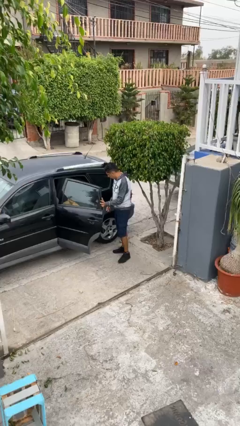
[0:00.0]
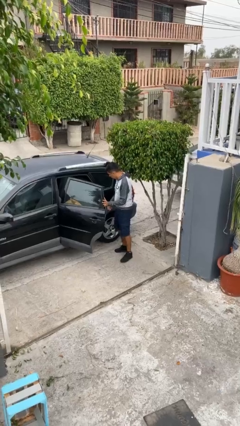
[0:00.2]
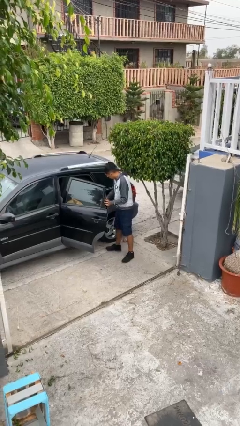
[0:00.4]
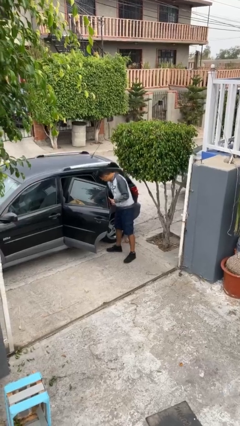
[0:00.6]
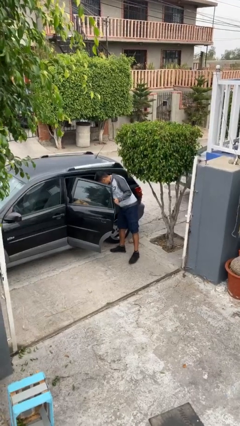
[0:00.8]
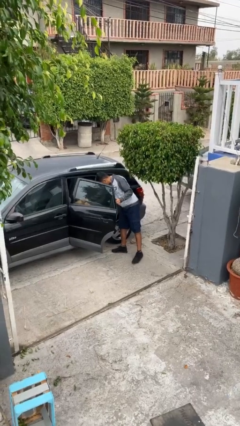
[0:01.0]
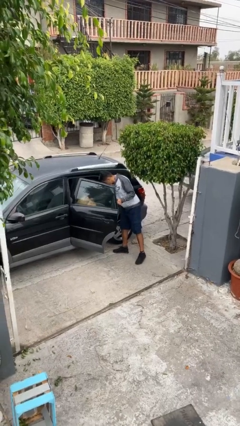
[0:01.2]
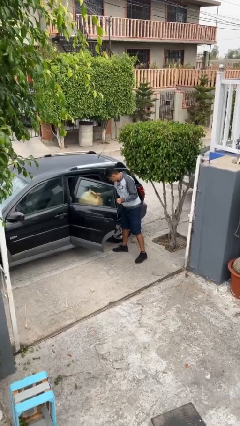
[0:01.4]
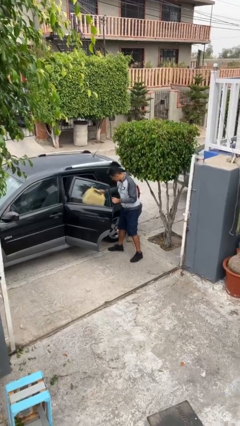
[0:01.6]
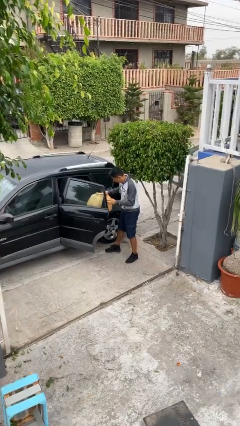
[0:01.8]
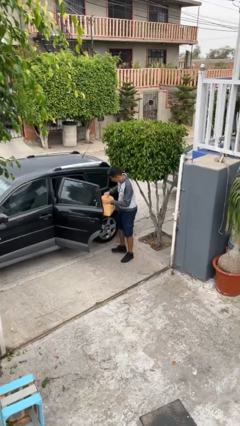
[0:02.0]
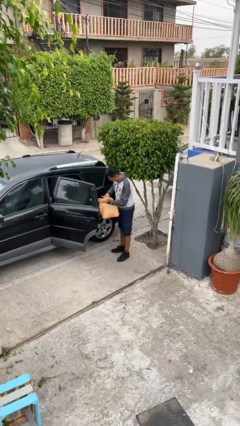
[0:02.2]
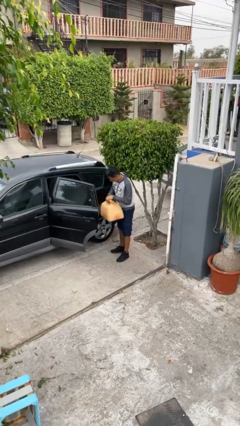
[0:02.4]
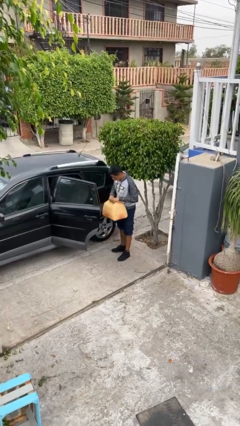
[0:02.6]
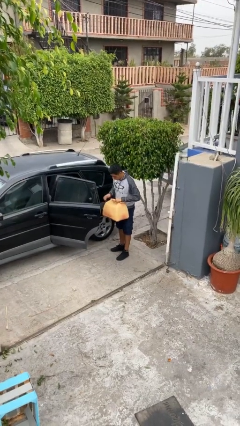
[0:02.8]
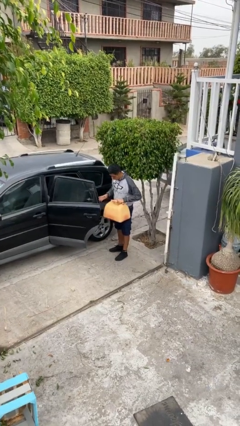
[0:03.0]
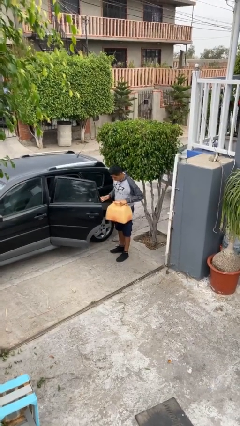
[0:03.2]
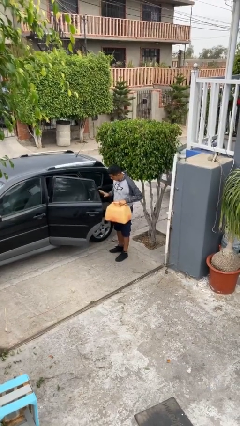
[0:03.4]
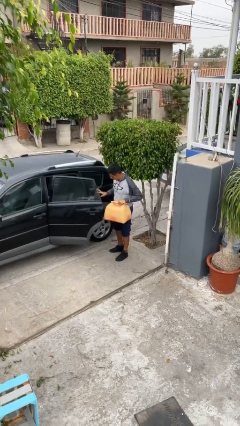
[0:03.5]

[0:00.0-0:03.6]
person unloads car

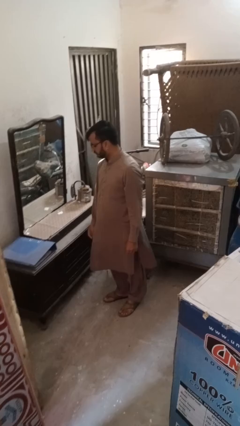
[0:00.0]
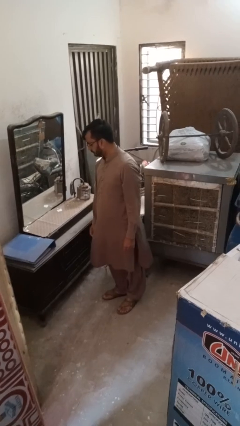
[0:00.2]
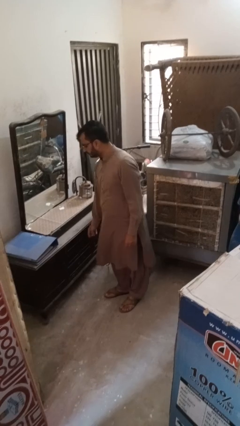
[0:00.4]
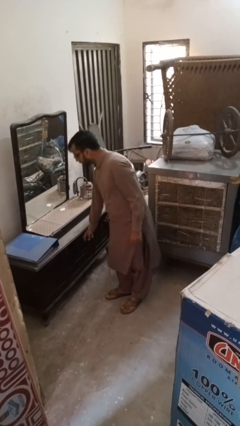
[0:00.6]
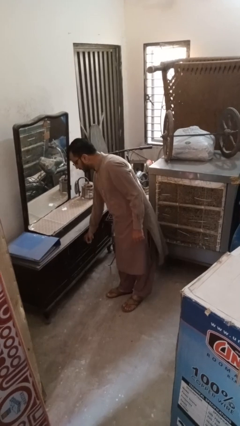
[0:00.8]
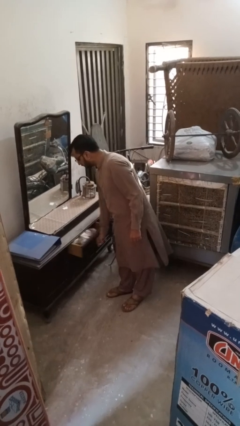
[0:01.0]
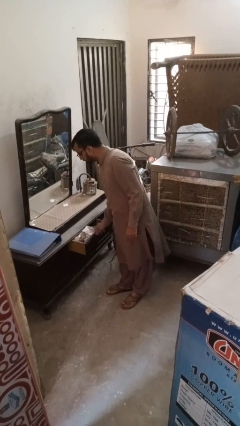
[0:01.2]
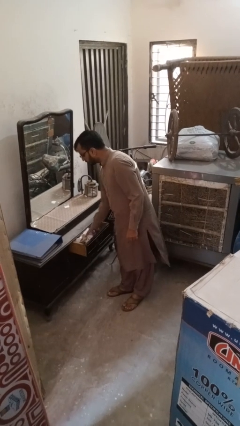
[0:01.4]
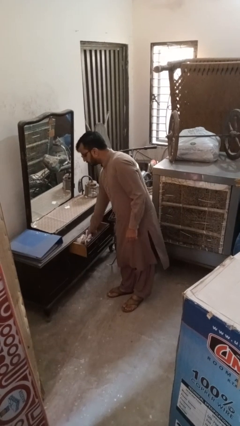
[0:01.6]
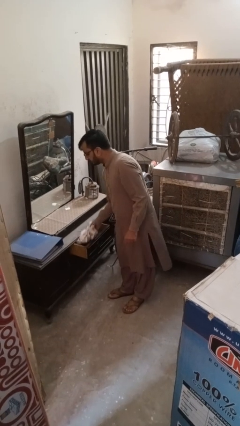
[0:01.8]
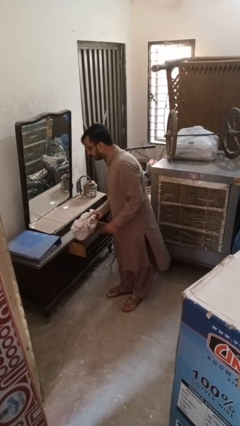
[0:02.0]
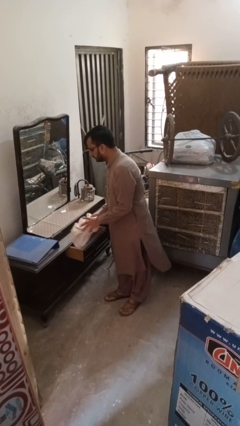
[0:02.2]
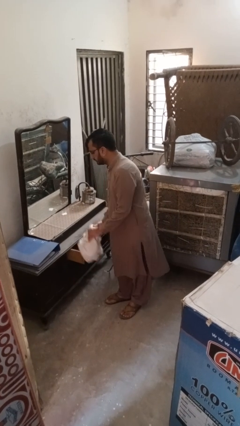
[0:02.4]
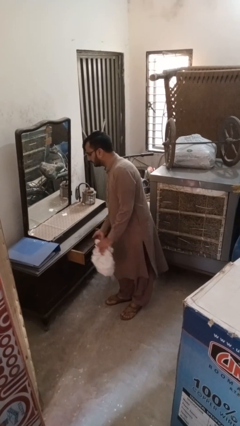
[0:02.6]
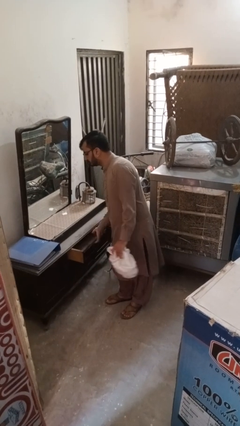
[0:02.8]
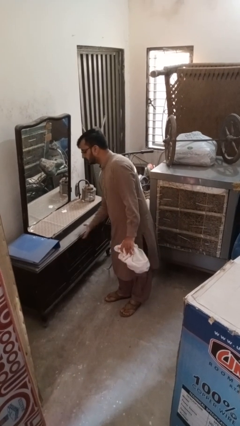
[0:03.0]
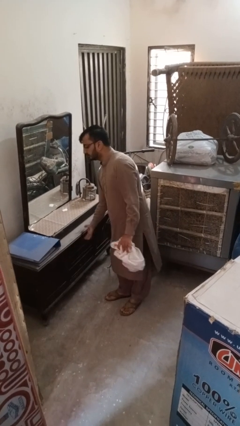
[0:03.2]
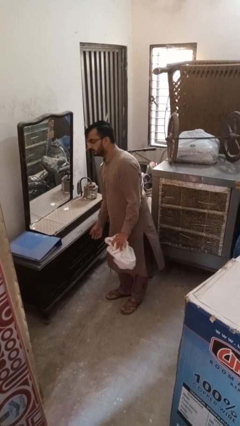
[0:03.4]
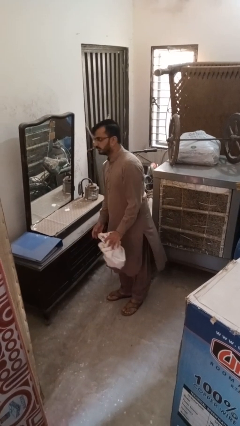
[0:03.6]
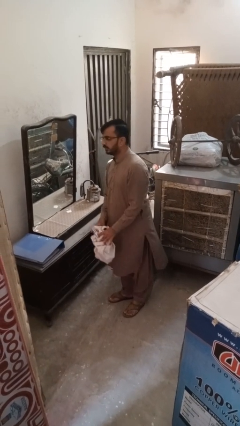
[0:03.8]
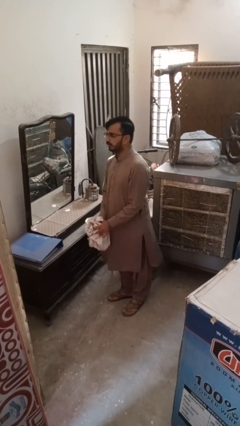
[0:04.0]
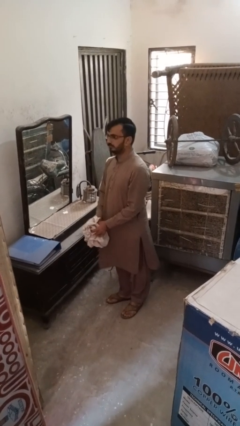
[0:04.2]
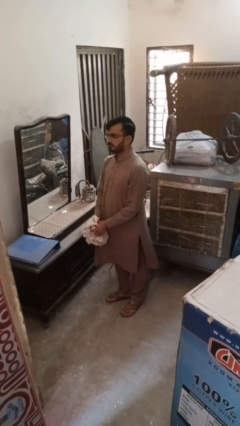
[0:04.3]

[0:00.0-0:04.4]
person takes clothes from dresser

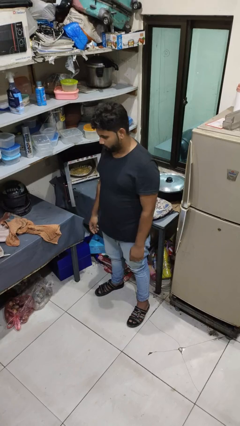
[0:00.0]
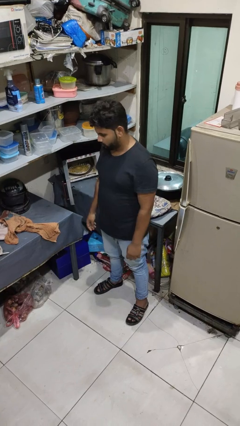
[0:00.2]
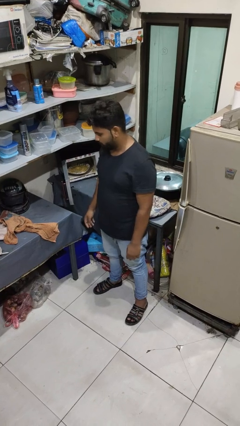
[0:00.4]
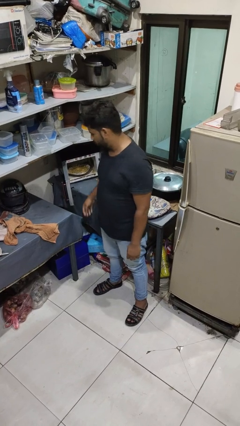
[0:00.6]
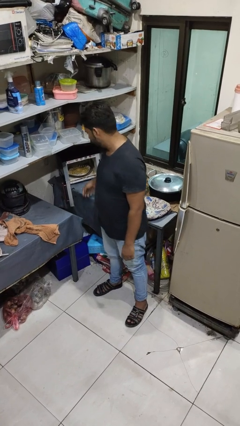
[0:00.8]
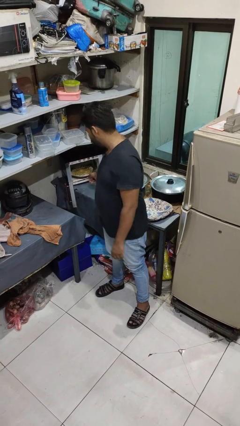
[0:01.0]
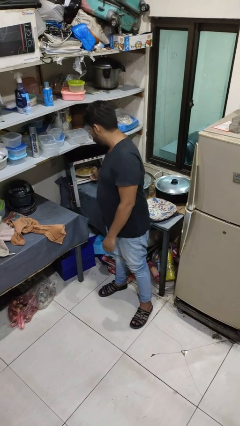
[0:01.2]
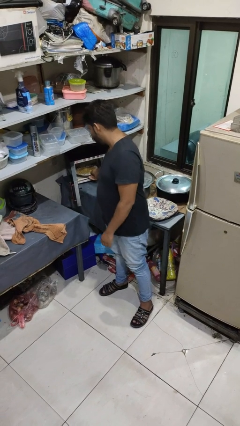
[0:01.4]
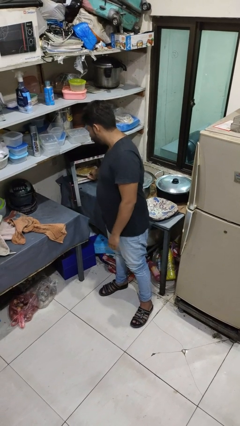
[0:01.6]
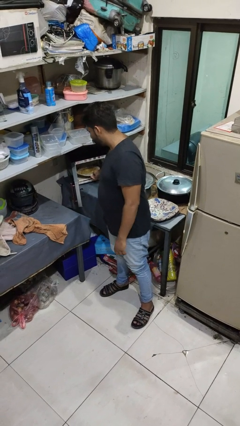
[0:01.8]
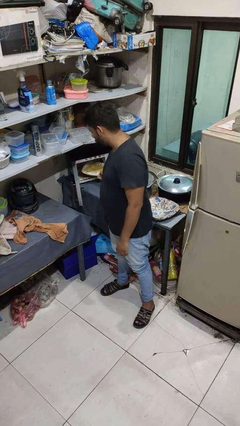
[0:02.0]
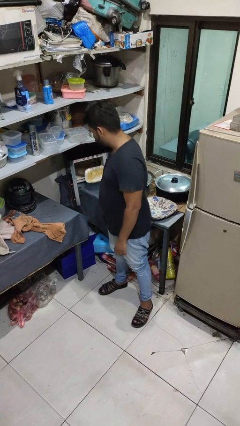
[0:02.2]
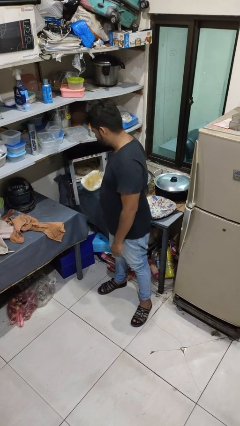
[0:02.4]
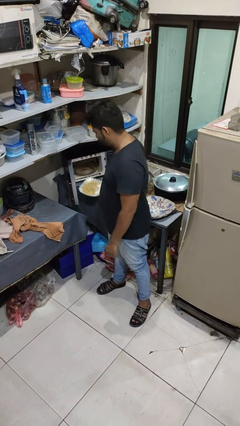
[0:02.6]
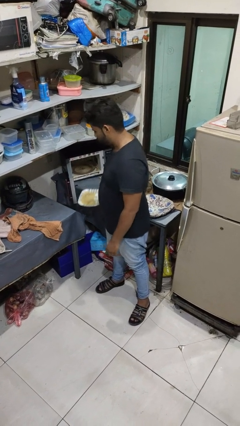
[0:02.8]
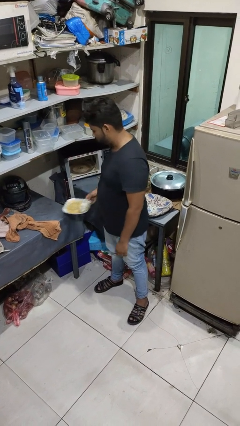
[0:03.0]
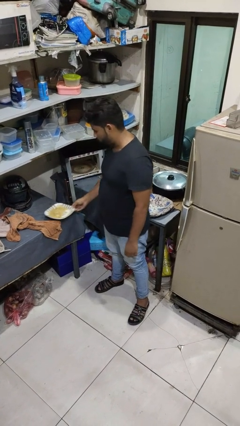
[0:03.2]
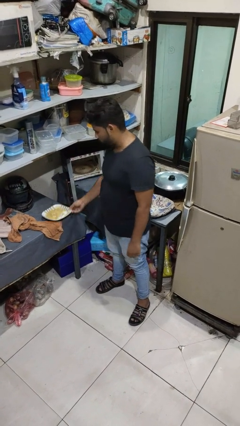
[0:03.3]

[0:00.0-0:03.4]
person takes object from microwave

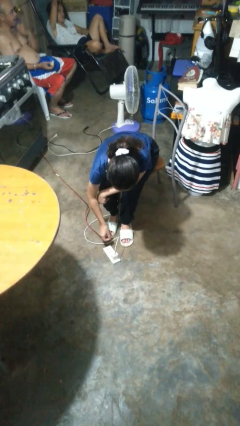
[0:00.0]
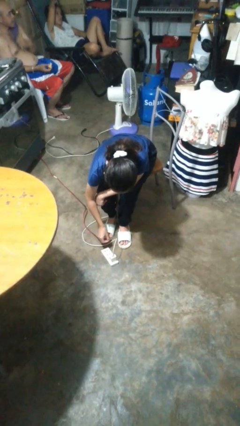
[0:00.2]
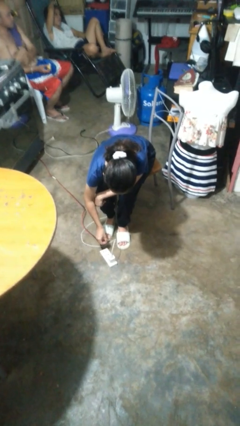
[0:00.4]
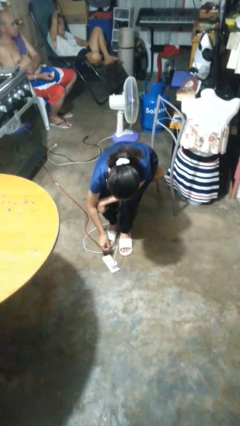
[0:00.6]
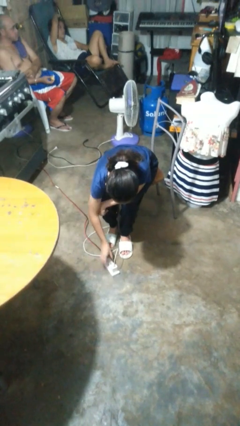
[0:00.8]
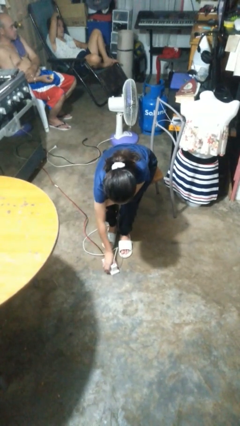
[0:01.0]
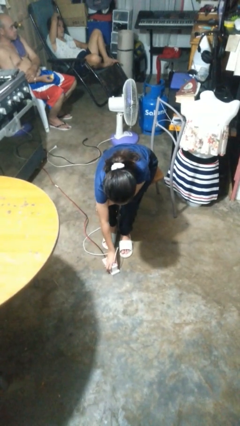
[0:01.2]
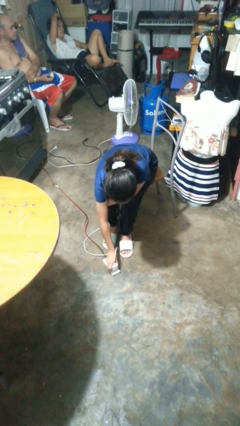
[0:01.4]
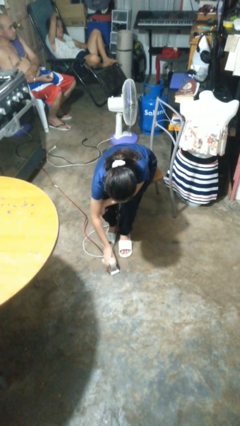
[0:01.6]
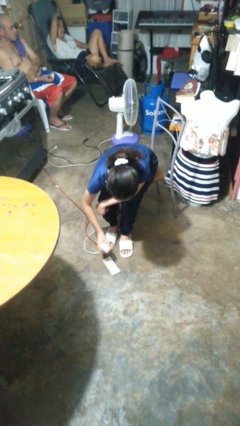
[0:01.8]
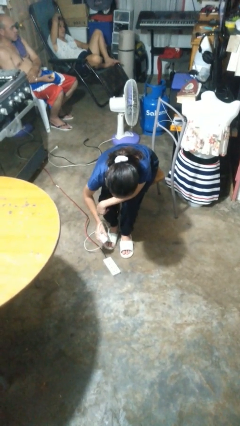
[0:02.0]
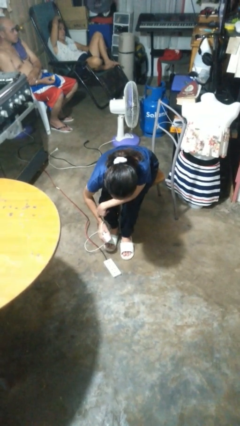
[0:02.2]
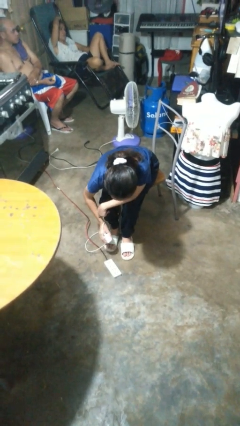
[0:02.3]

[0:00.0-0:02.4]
person unplugs from electrical socket

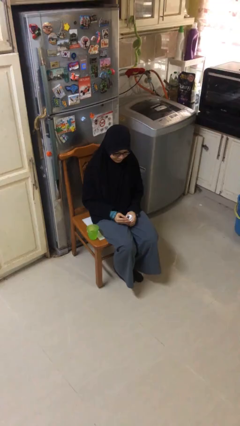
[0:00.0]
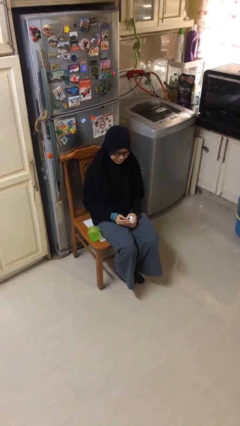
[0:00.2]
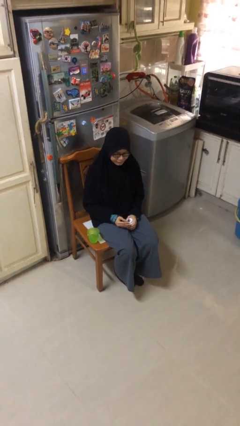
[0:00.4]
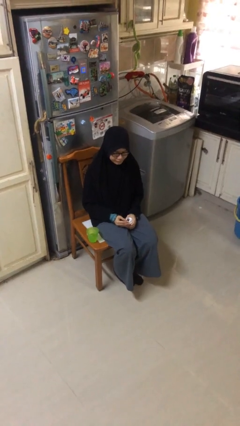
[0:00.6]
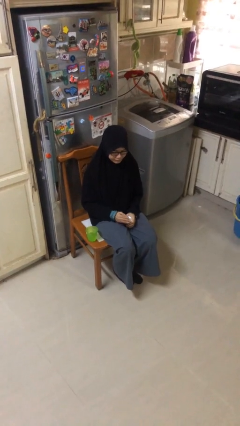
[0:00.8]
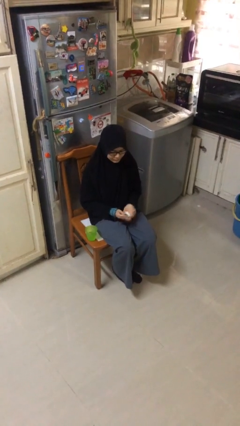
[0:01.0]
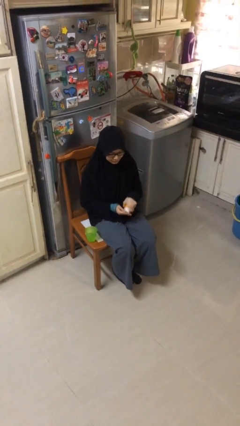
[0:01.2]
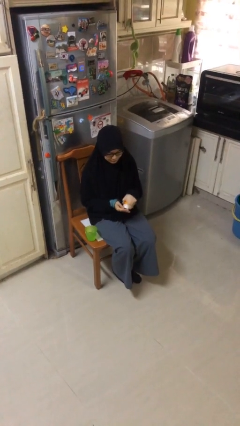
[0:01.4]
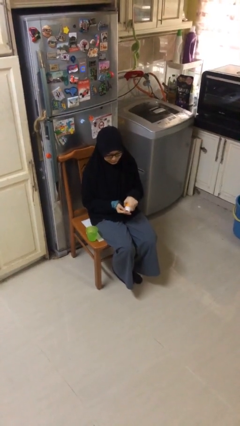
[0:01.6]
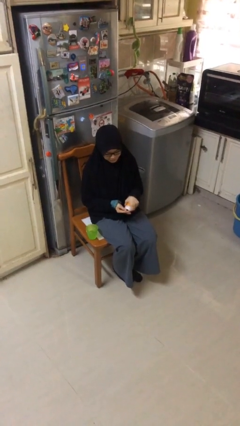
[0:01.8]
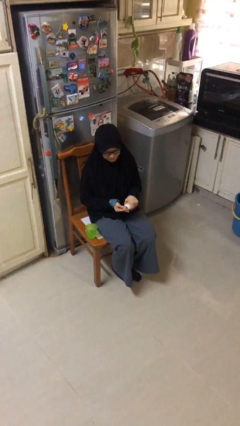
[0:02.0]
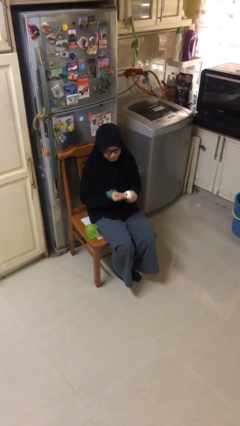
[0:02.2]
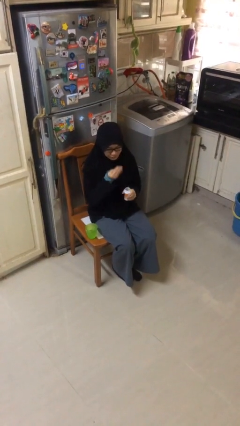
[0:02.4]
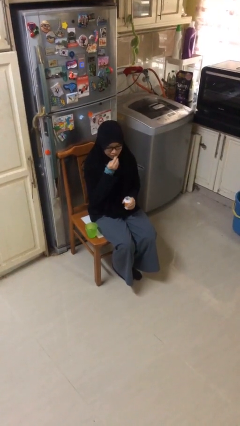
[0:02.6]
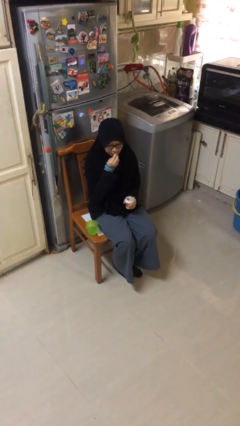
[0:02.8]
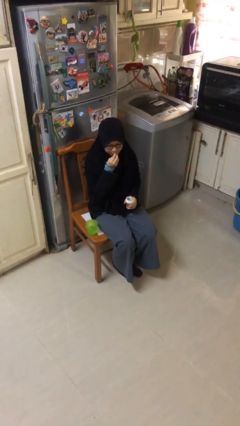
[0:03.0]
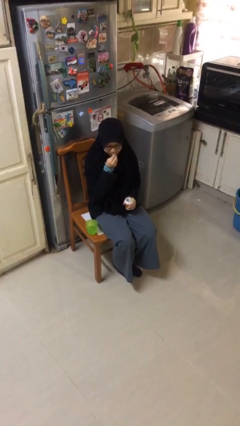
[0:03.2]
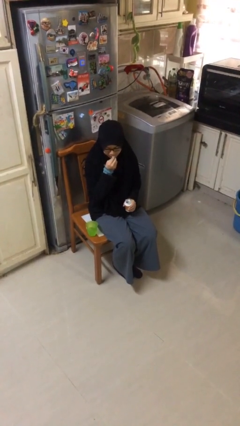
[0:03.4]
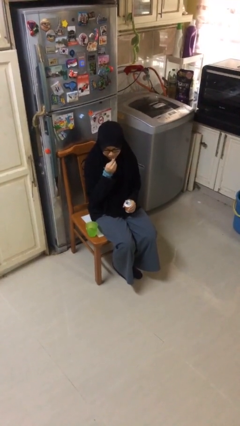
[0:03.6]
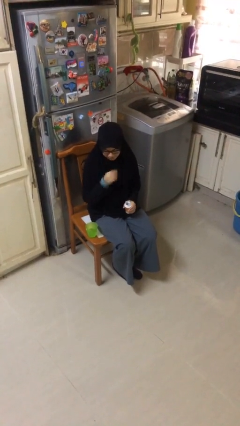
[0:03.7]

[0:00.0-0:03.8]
person takes medicine pills
